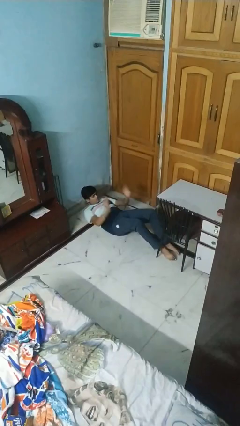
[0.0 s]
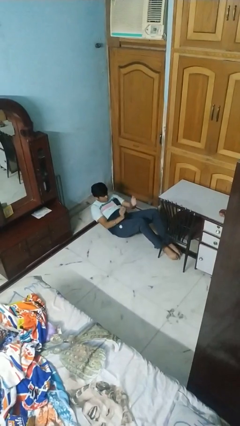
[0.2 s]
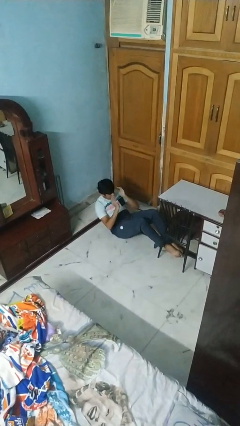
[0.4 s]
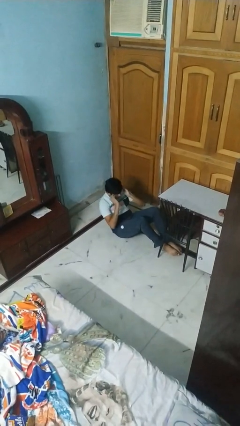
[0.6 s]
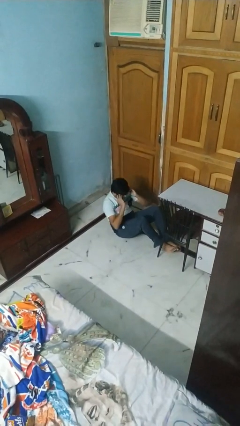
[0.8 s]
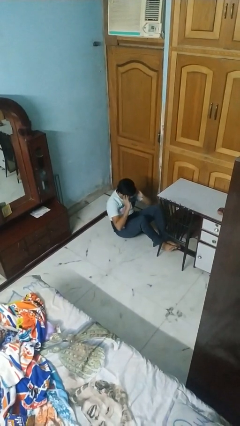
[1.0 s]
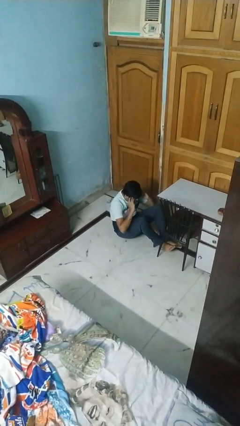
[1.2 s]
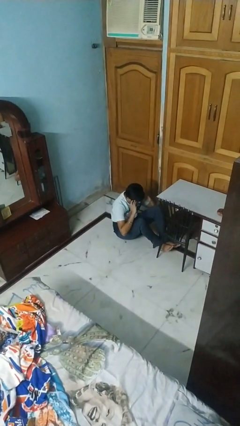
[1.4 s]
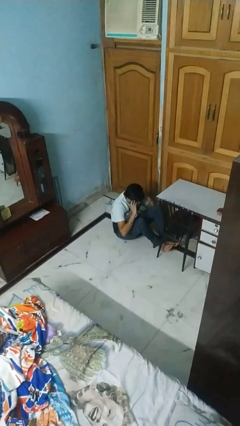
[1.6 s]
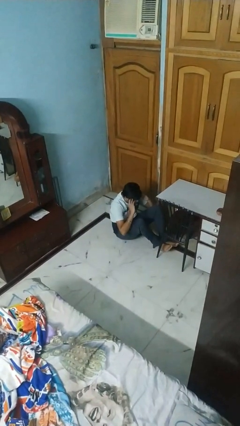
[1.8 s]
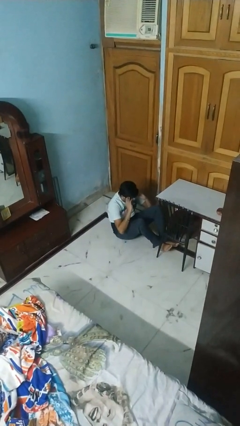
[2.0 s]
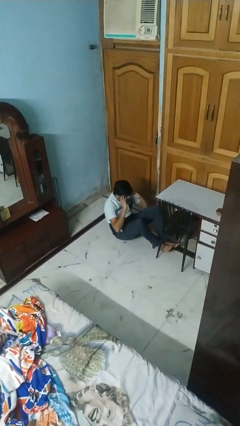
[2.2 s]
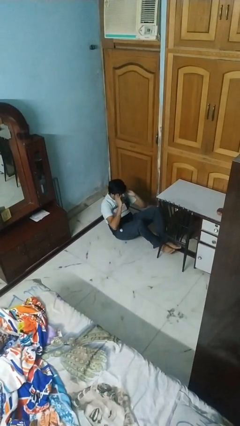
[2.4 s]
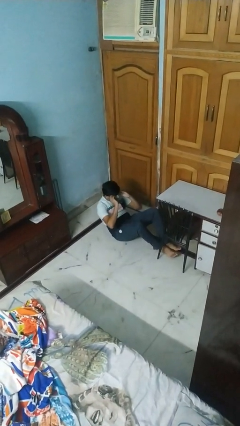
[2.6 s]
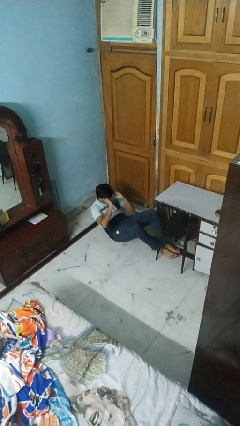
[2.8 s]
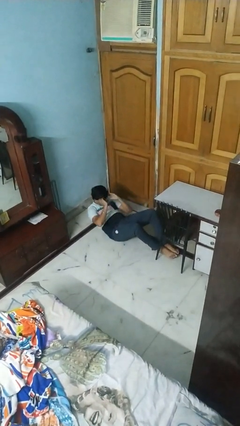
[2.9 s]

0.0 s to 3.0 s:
person exercises with situp

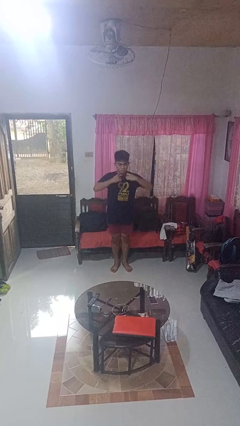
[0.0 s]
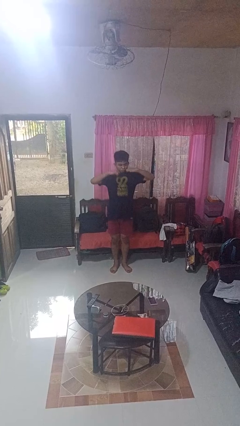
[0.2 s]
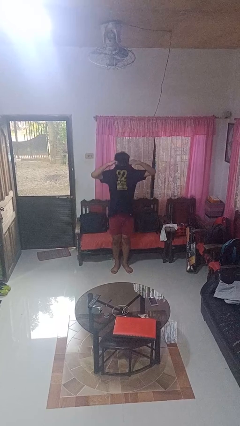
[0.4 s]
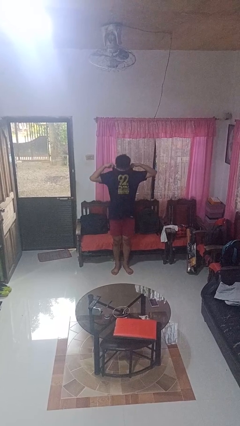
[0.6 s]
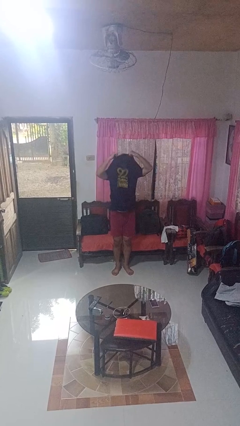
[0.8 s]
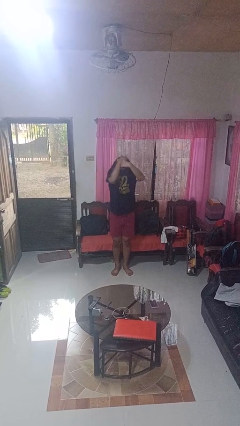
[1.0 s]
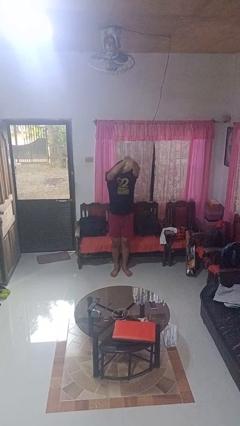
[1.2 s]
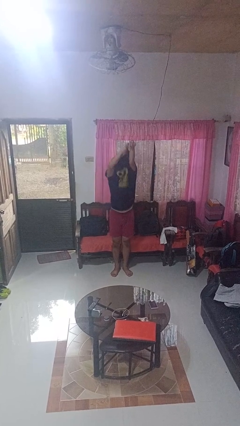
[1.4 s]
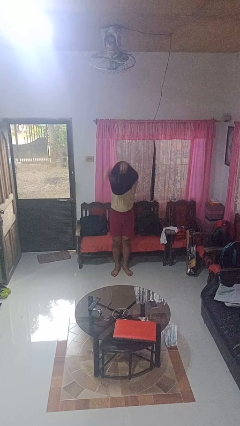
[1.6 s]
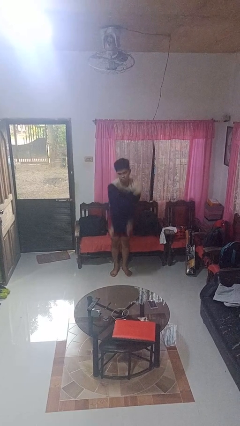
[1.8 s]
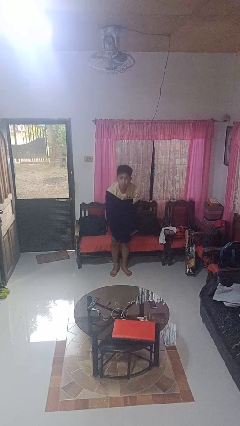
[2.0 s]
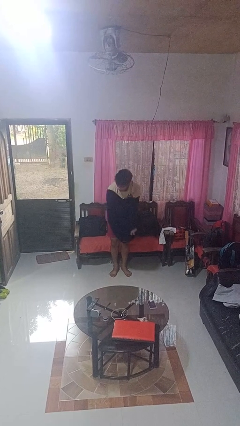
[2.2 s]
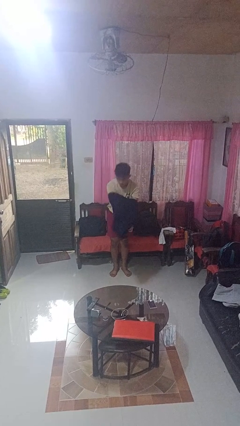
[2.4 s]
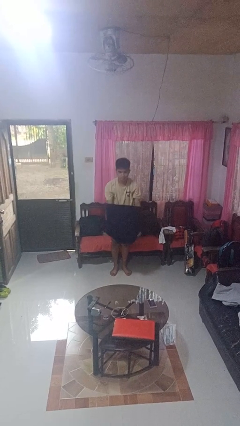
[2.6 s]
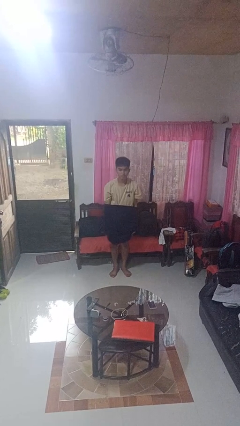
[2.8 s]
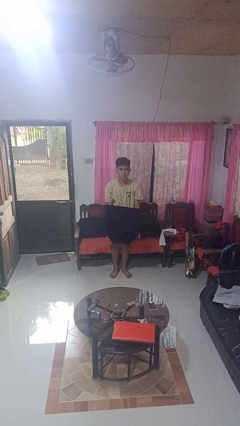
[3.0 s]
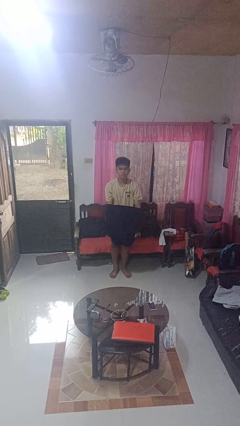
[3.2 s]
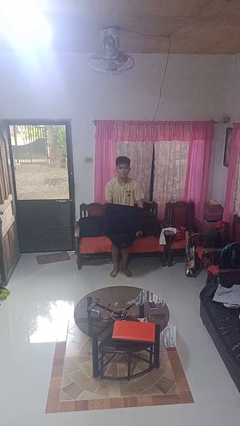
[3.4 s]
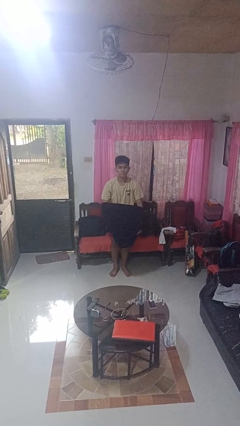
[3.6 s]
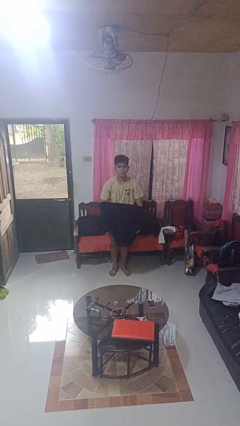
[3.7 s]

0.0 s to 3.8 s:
person takes off shirt

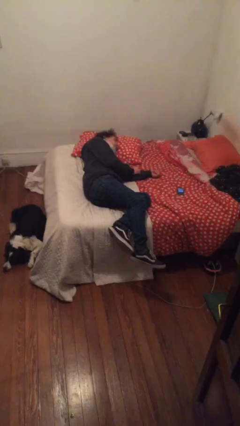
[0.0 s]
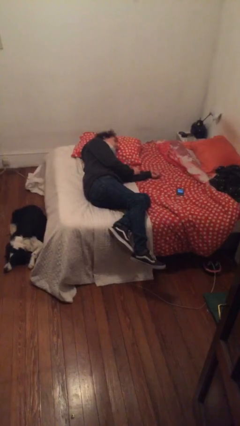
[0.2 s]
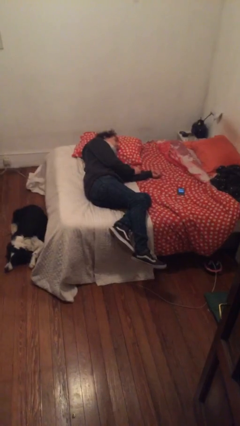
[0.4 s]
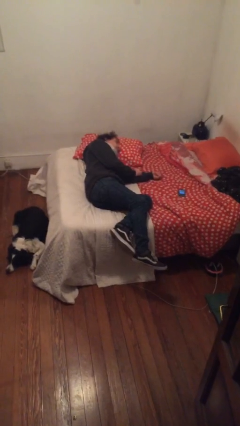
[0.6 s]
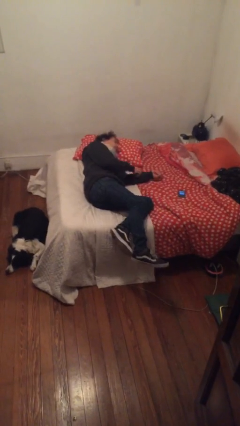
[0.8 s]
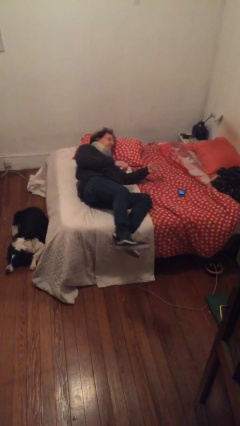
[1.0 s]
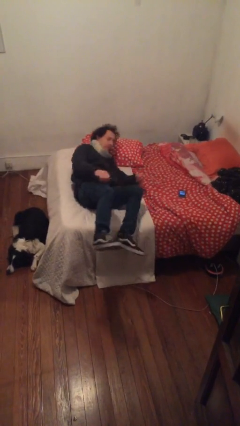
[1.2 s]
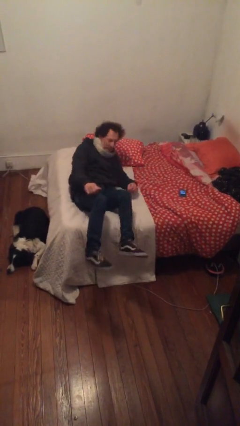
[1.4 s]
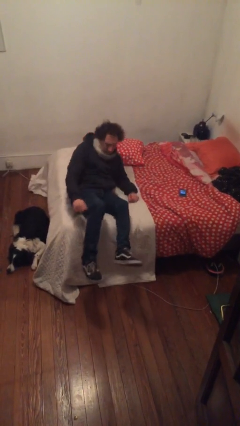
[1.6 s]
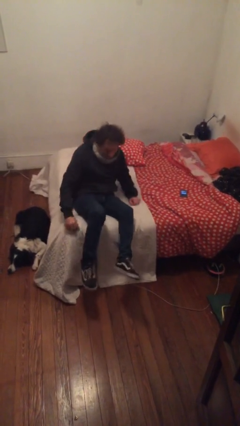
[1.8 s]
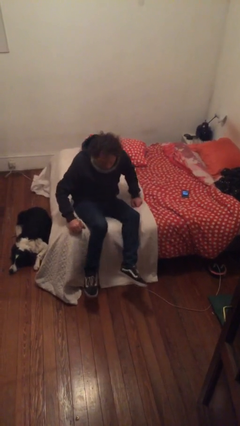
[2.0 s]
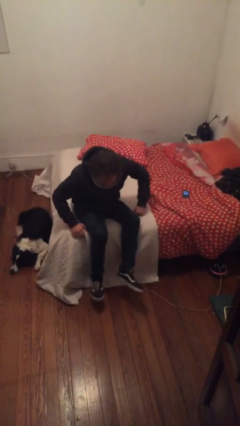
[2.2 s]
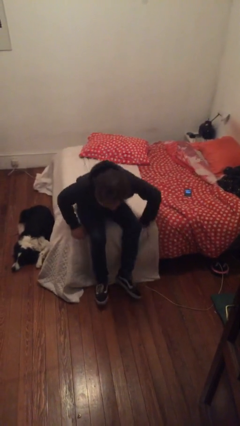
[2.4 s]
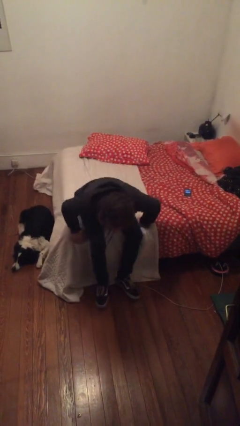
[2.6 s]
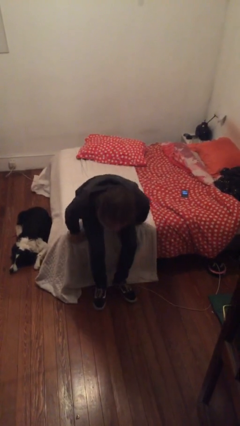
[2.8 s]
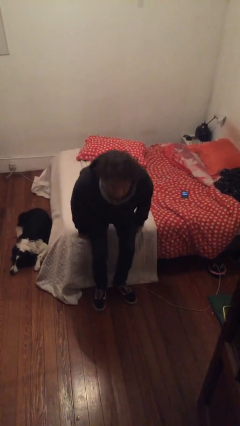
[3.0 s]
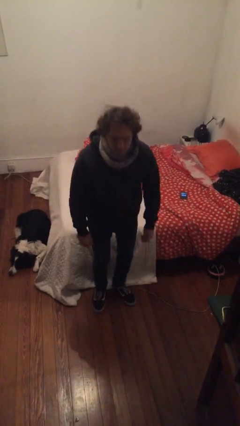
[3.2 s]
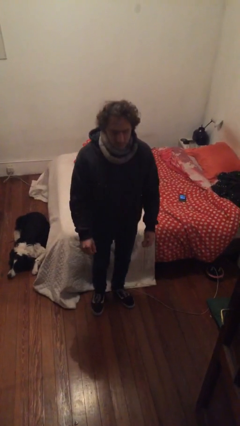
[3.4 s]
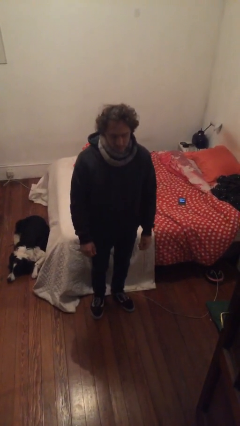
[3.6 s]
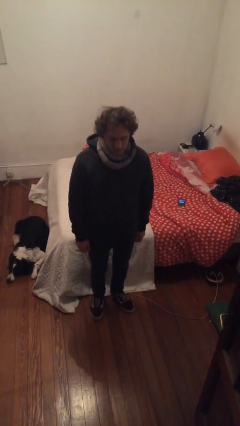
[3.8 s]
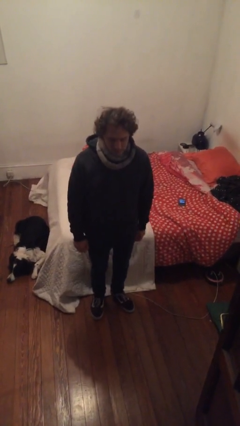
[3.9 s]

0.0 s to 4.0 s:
person stands up

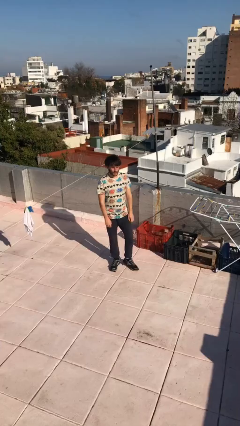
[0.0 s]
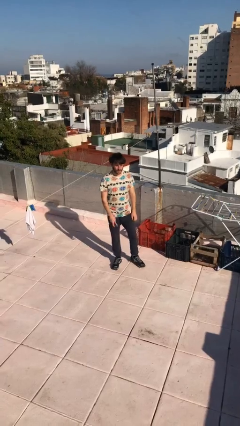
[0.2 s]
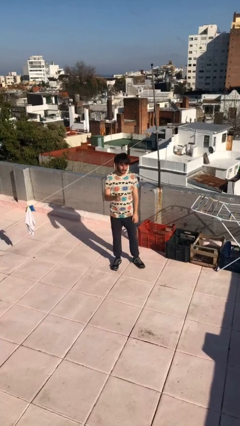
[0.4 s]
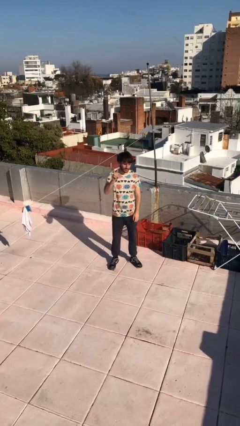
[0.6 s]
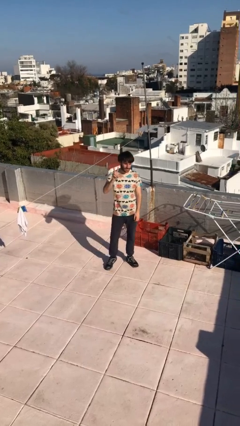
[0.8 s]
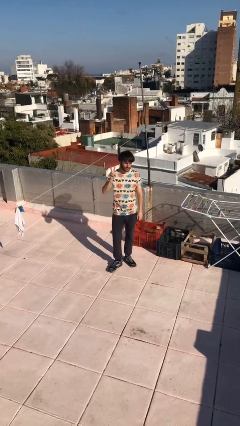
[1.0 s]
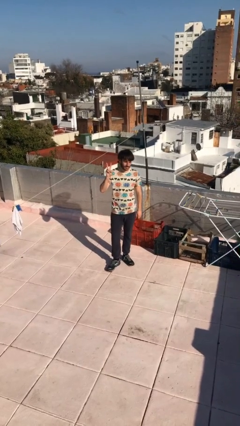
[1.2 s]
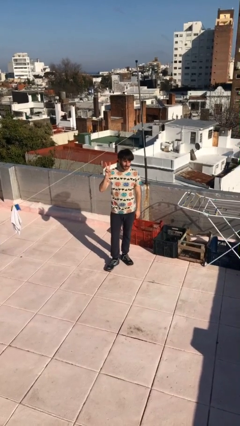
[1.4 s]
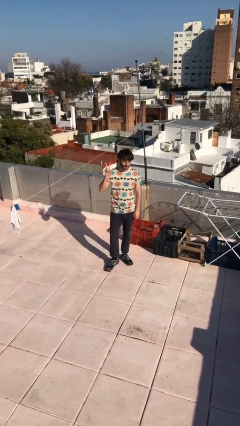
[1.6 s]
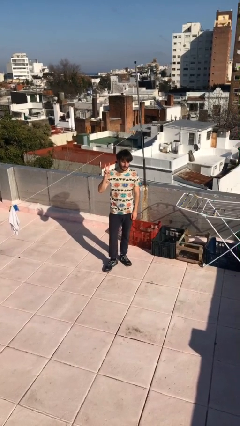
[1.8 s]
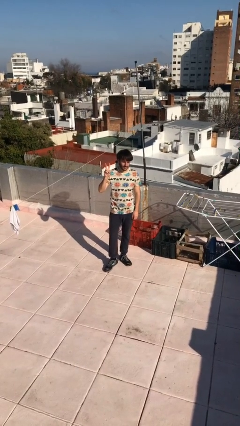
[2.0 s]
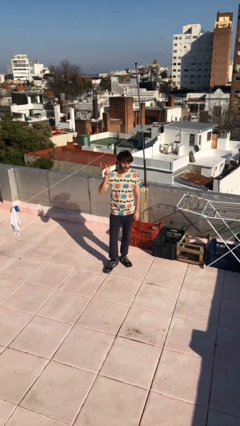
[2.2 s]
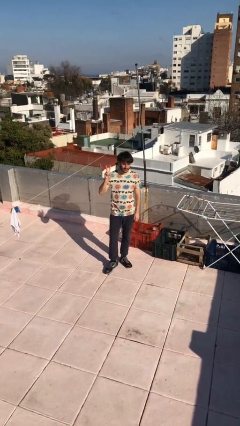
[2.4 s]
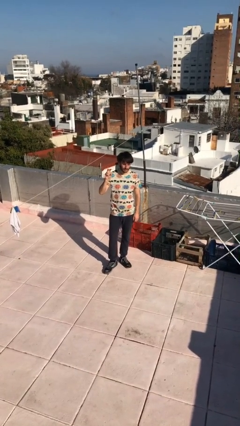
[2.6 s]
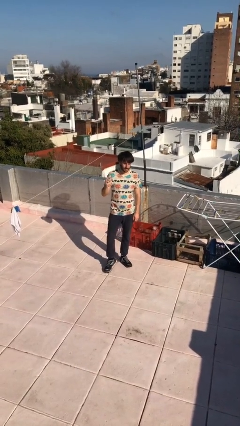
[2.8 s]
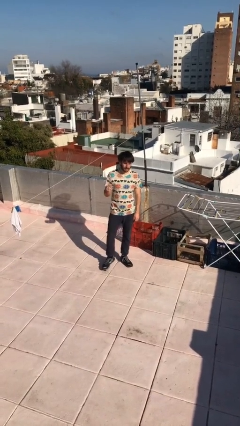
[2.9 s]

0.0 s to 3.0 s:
person gestures peace

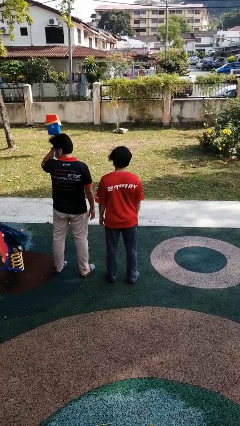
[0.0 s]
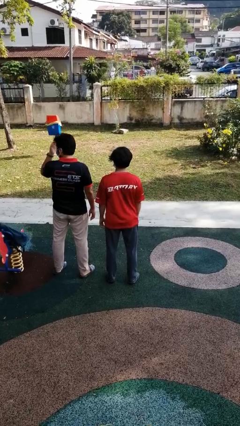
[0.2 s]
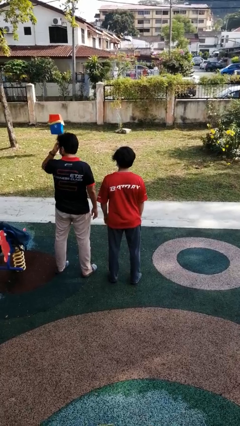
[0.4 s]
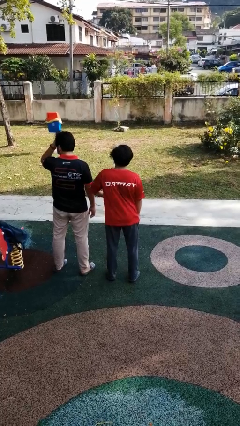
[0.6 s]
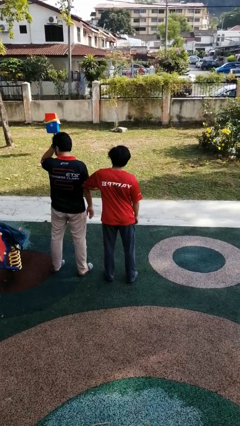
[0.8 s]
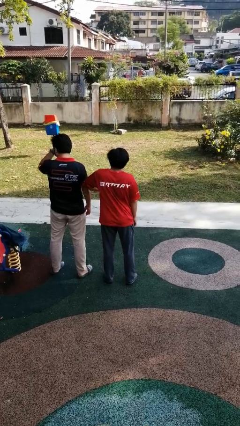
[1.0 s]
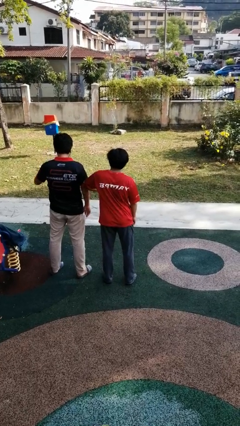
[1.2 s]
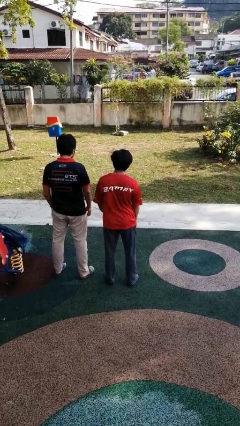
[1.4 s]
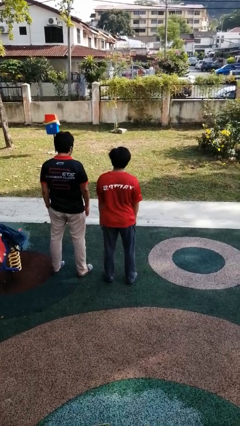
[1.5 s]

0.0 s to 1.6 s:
person nudges person with elbow

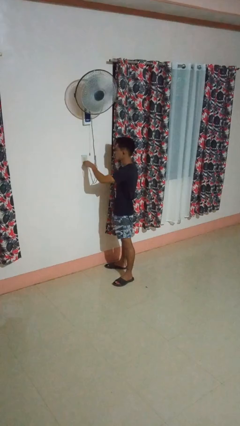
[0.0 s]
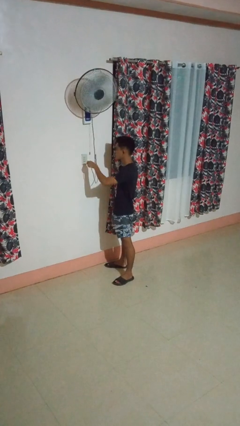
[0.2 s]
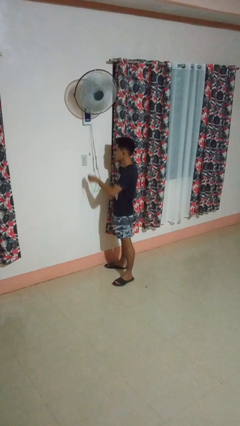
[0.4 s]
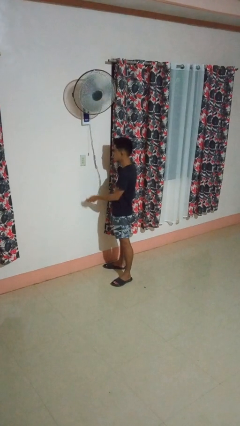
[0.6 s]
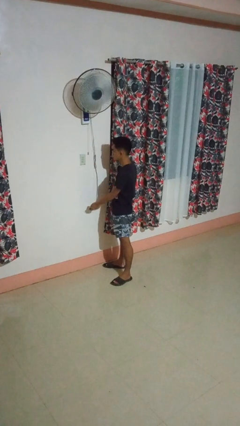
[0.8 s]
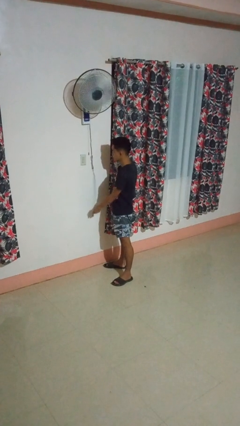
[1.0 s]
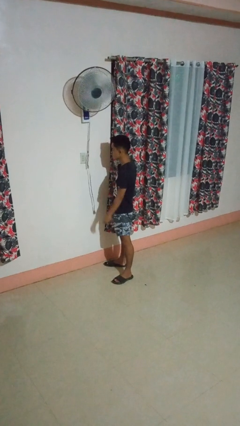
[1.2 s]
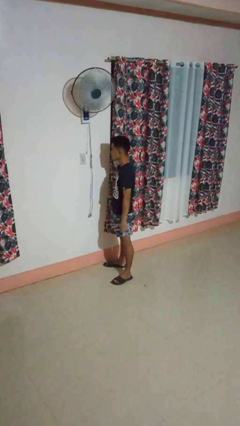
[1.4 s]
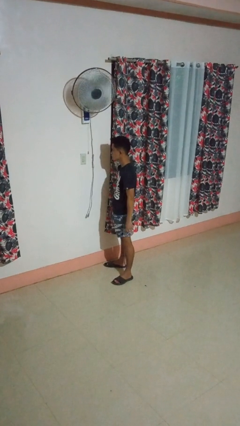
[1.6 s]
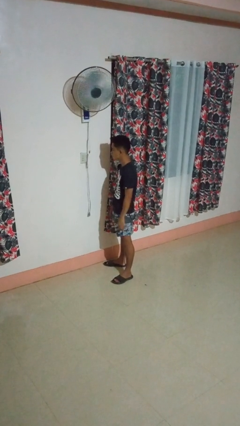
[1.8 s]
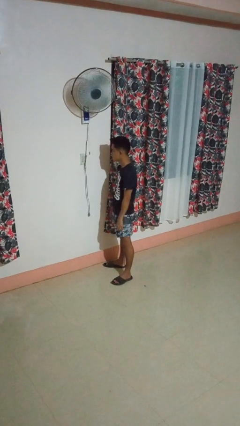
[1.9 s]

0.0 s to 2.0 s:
person unplugs from electrical socket
